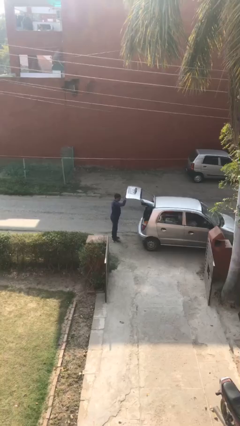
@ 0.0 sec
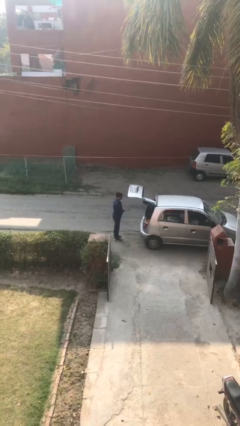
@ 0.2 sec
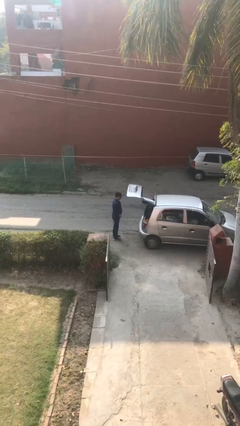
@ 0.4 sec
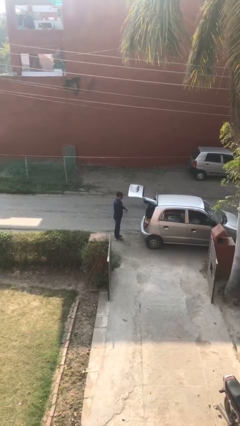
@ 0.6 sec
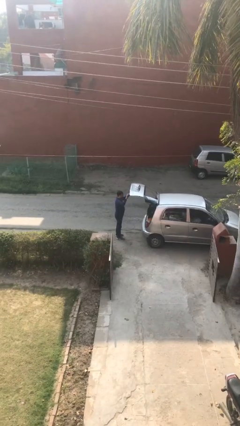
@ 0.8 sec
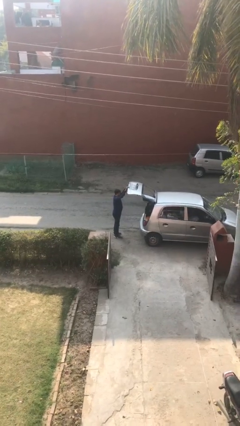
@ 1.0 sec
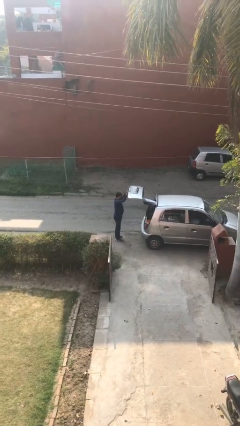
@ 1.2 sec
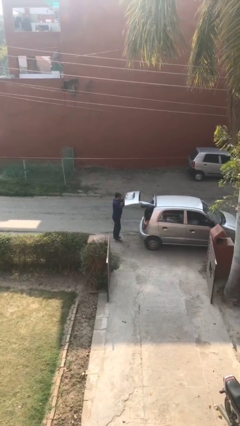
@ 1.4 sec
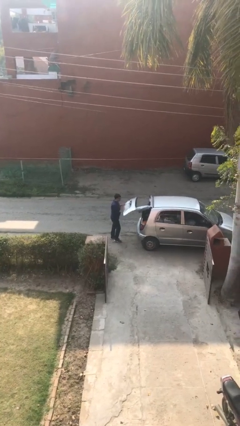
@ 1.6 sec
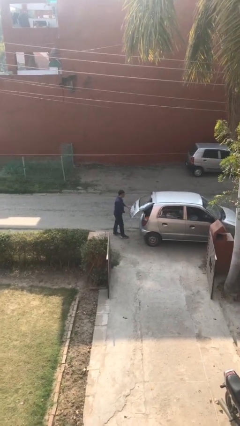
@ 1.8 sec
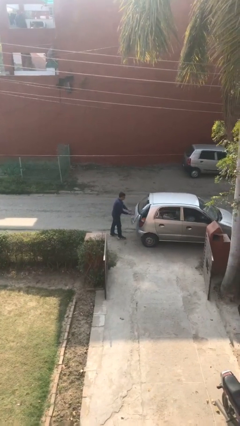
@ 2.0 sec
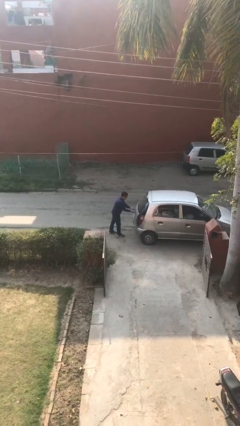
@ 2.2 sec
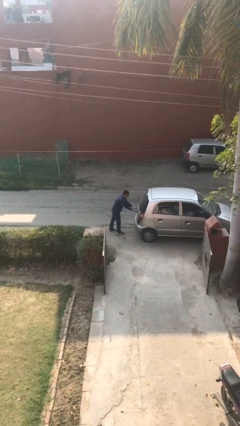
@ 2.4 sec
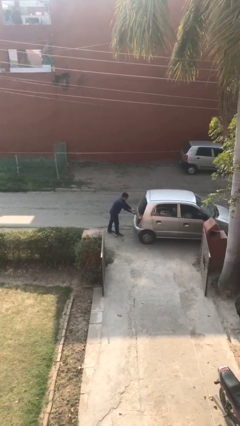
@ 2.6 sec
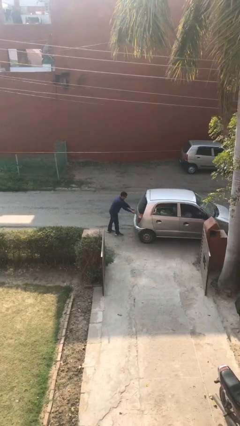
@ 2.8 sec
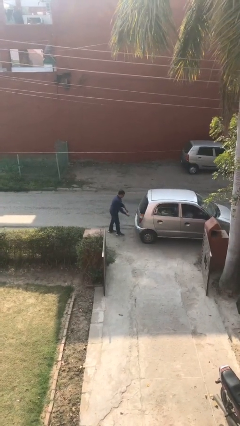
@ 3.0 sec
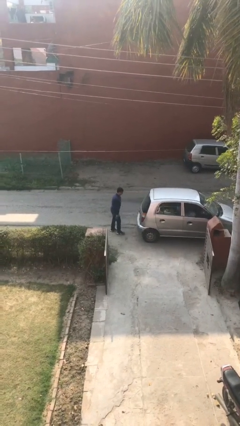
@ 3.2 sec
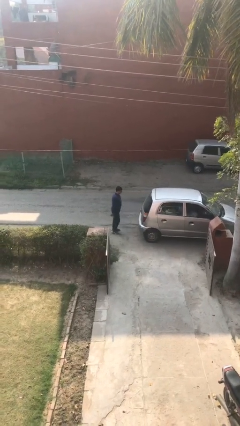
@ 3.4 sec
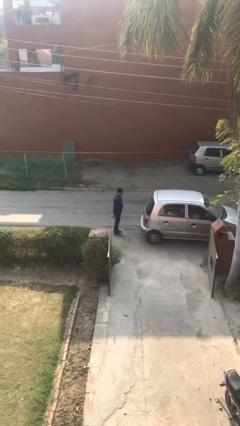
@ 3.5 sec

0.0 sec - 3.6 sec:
person closes car trunk

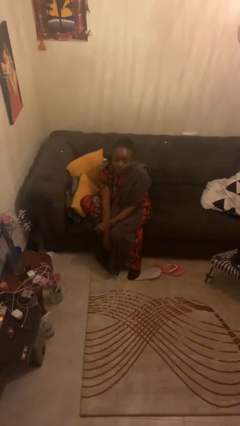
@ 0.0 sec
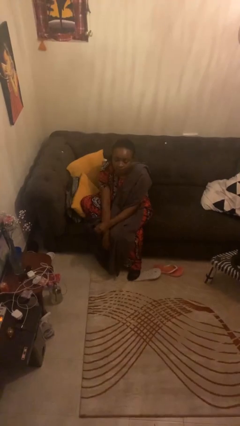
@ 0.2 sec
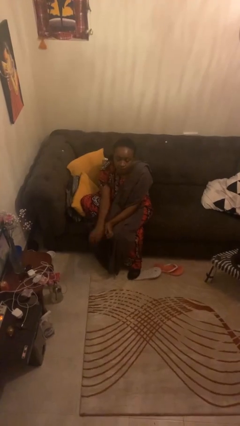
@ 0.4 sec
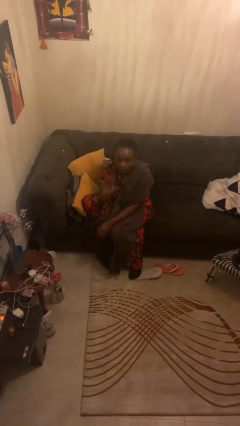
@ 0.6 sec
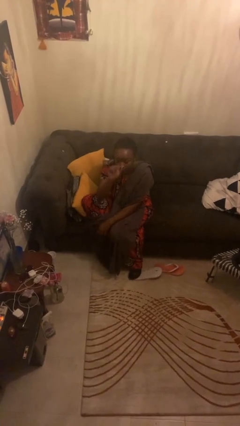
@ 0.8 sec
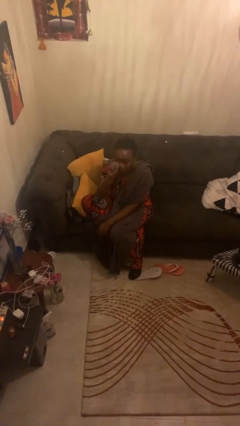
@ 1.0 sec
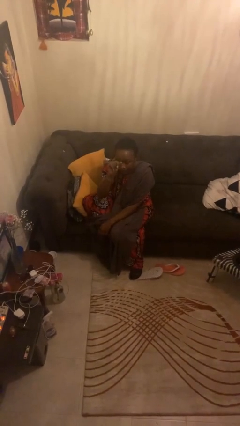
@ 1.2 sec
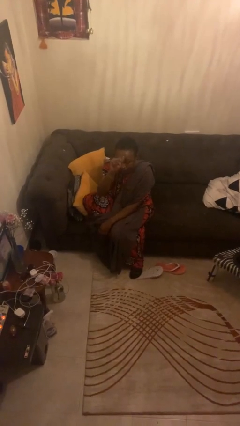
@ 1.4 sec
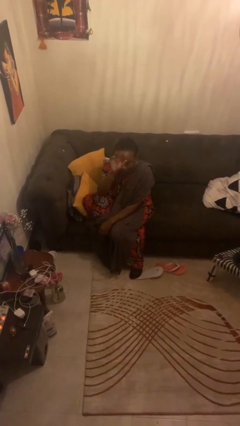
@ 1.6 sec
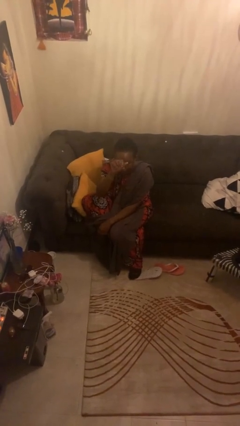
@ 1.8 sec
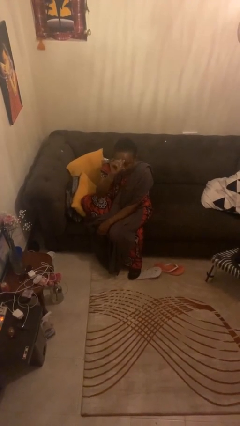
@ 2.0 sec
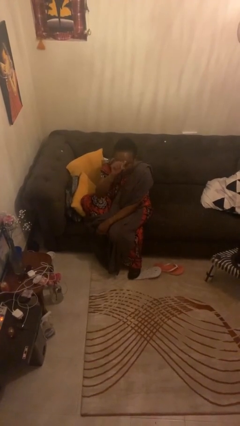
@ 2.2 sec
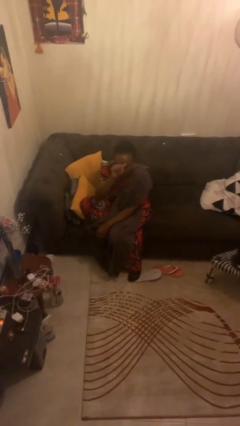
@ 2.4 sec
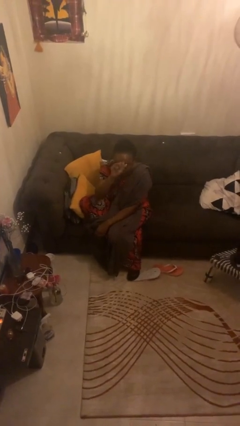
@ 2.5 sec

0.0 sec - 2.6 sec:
person gestures come here

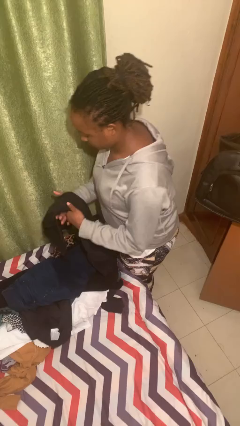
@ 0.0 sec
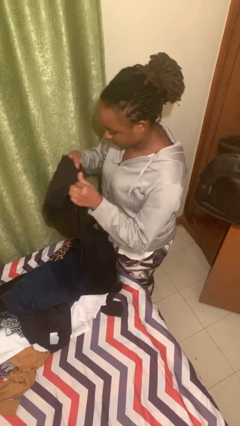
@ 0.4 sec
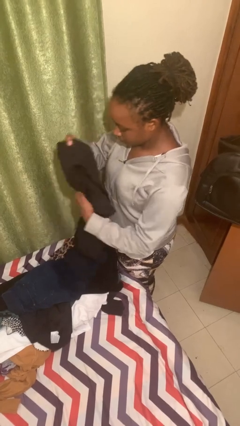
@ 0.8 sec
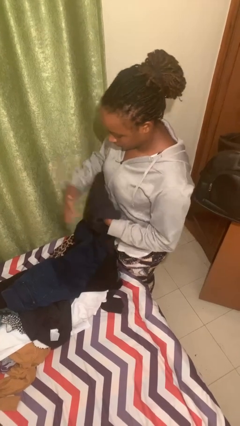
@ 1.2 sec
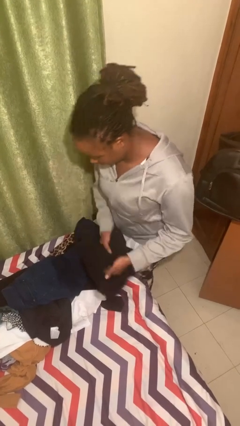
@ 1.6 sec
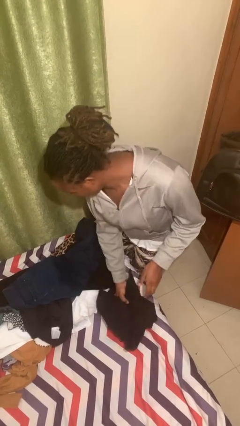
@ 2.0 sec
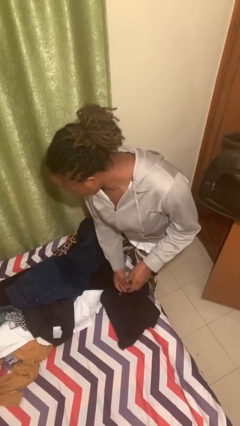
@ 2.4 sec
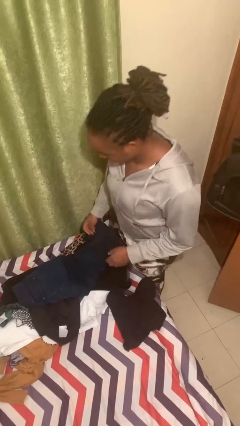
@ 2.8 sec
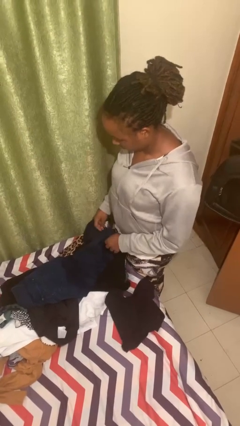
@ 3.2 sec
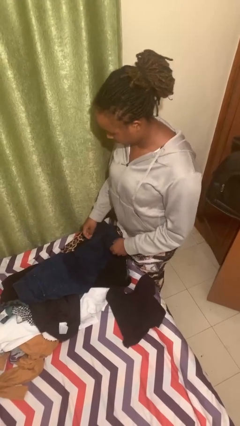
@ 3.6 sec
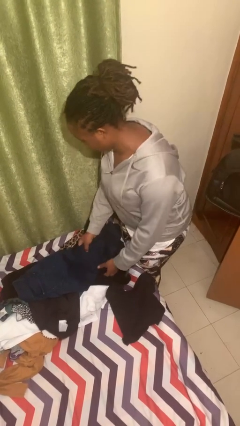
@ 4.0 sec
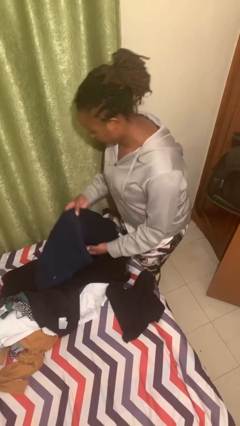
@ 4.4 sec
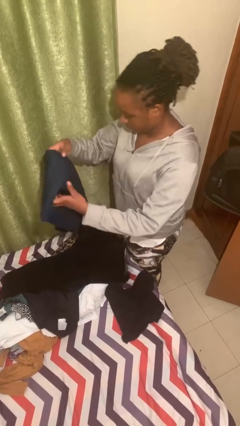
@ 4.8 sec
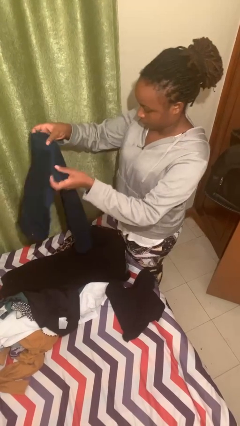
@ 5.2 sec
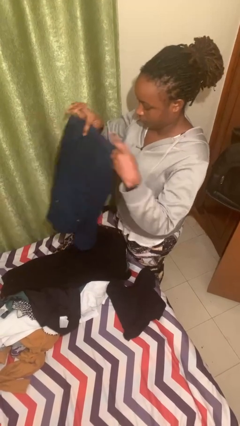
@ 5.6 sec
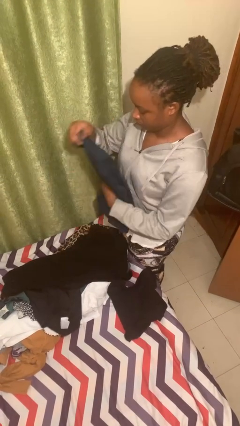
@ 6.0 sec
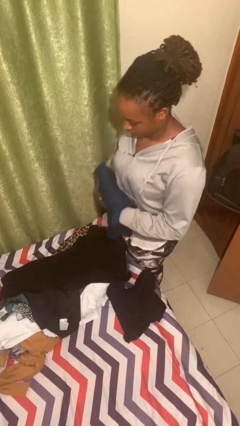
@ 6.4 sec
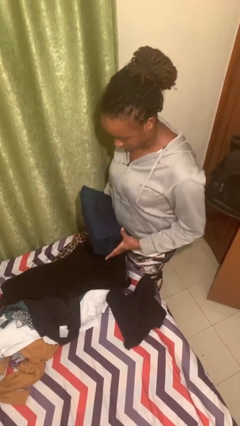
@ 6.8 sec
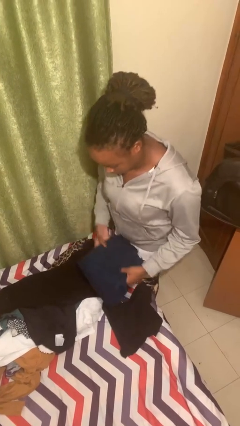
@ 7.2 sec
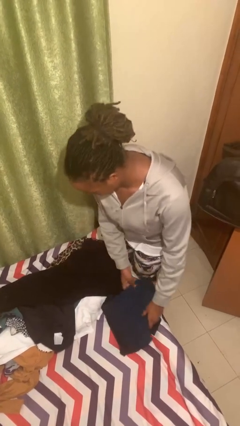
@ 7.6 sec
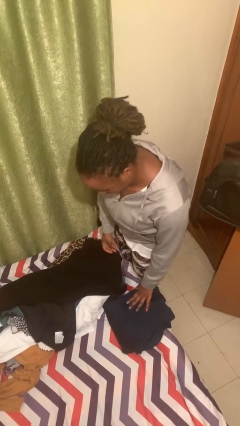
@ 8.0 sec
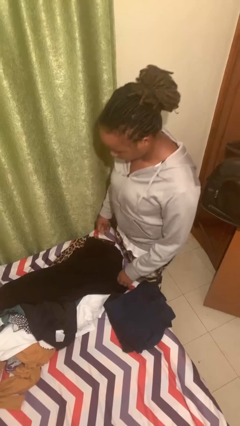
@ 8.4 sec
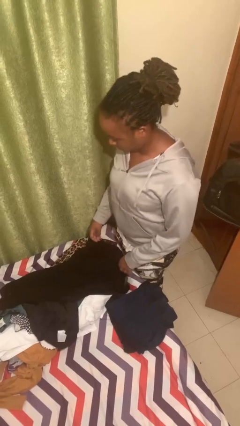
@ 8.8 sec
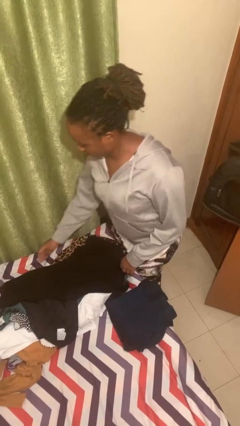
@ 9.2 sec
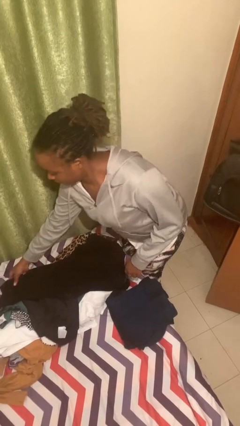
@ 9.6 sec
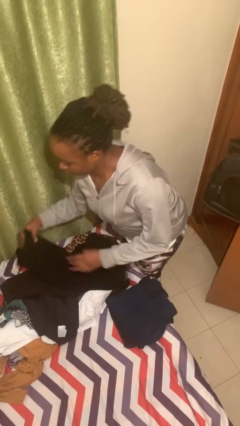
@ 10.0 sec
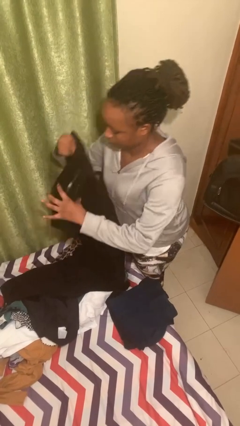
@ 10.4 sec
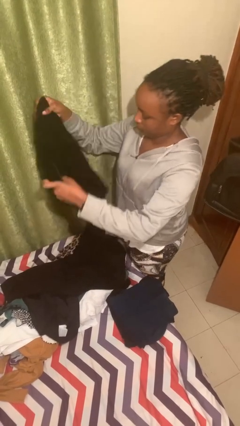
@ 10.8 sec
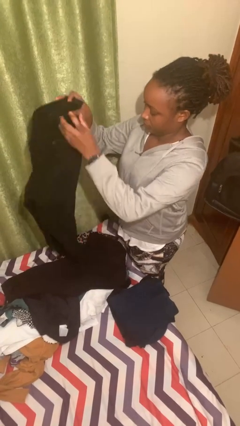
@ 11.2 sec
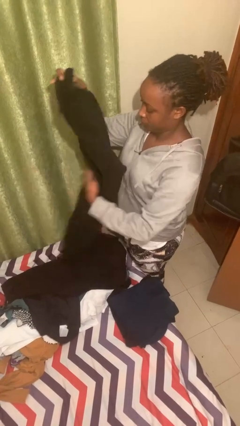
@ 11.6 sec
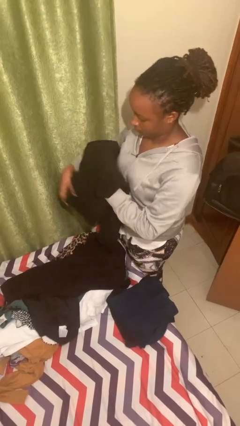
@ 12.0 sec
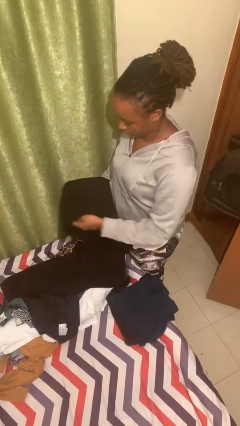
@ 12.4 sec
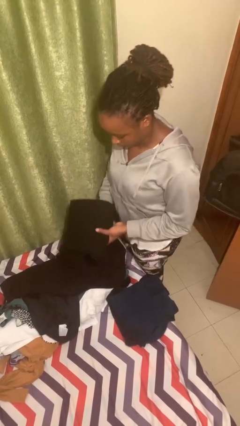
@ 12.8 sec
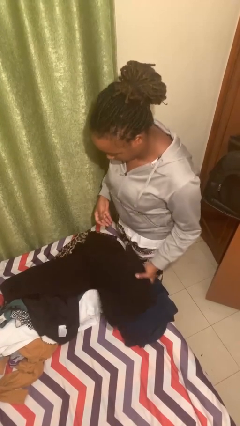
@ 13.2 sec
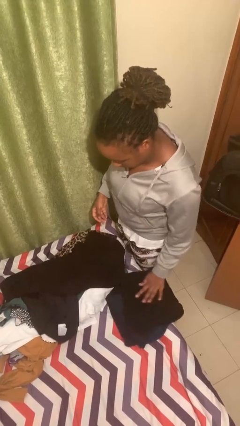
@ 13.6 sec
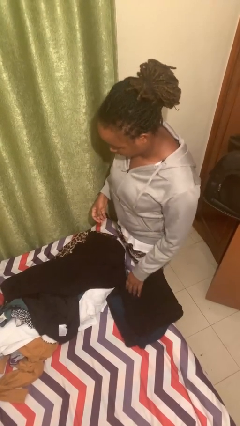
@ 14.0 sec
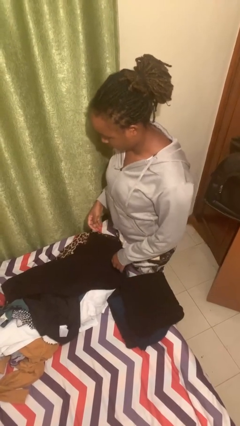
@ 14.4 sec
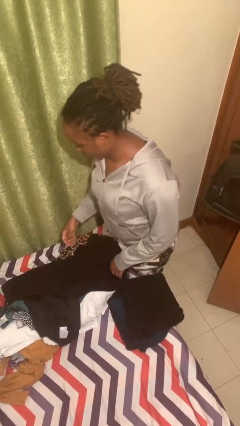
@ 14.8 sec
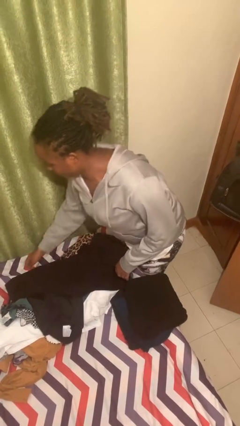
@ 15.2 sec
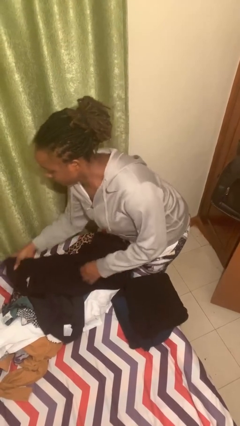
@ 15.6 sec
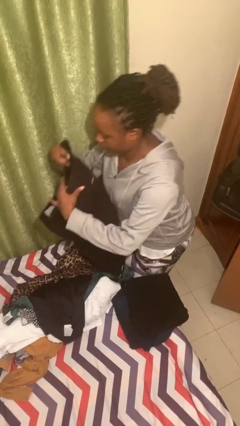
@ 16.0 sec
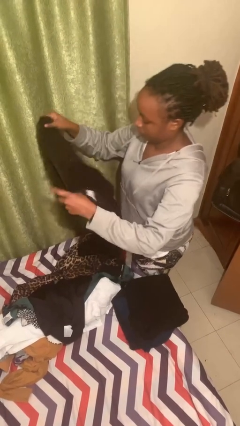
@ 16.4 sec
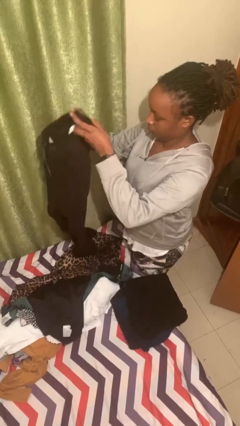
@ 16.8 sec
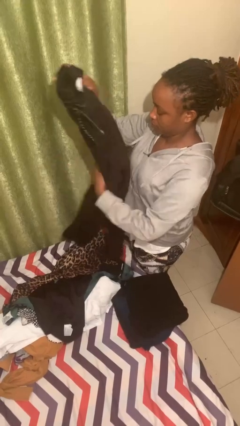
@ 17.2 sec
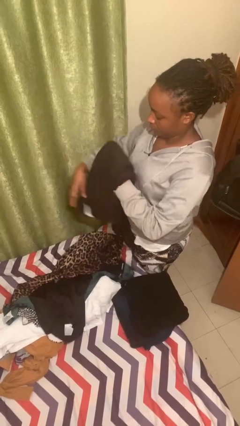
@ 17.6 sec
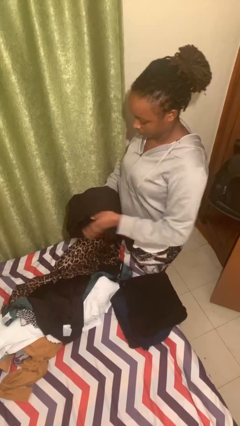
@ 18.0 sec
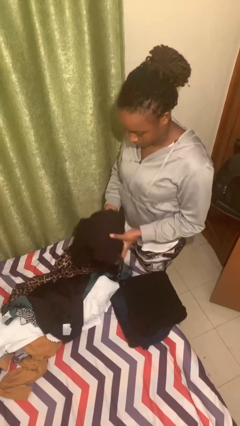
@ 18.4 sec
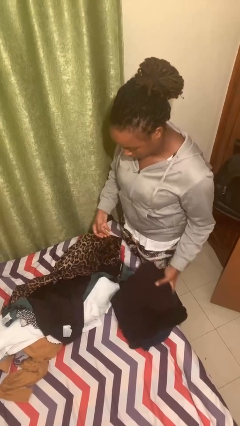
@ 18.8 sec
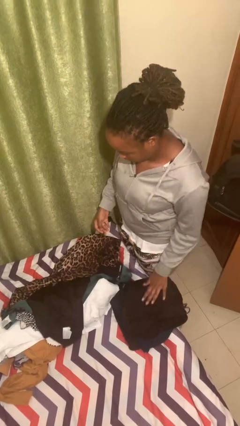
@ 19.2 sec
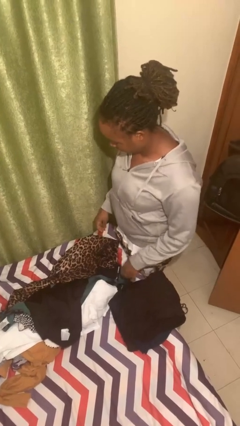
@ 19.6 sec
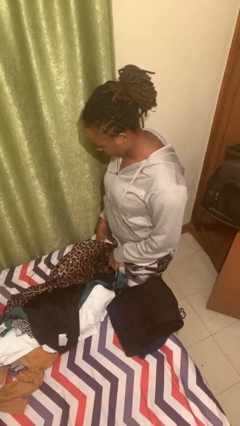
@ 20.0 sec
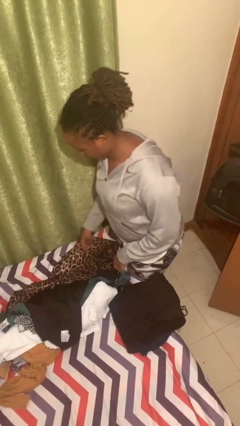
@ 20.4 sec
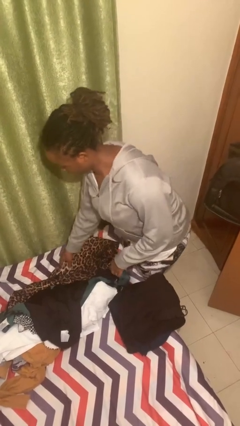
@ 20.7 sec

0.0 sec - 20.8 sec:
person folds pants

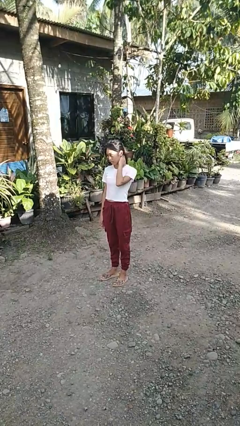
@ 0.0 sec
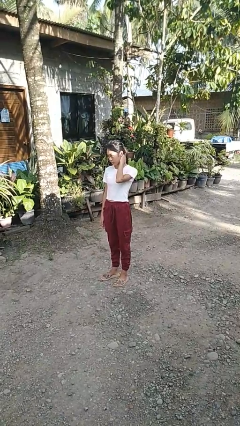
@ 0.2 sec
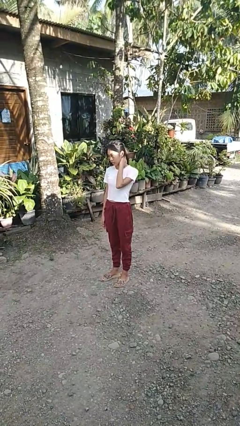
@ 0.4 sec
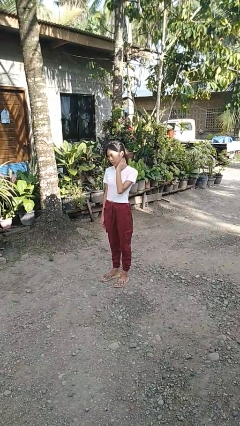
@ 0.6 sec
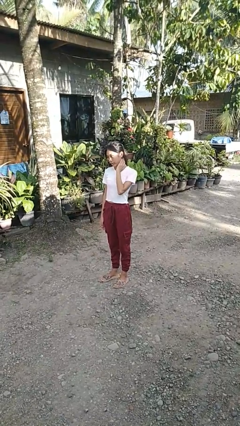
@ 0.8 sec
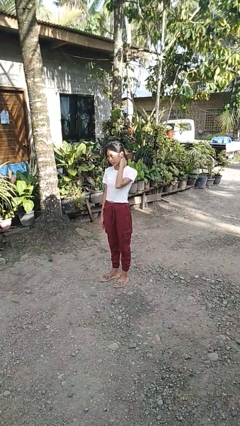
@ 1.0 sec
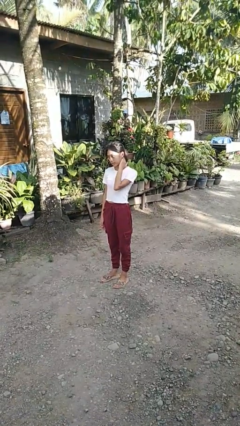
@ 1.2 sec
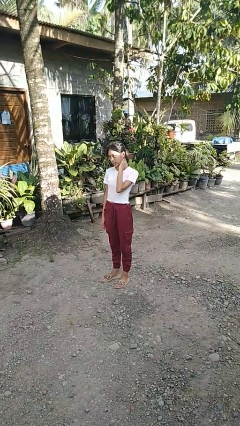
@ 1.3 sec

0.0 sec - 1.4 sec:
person rubs neck
